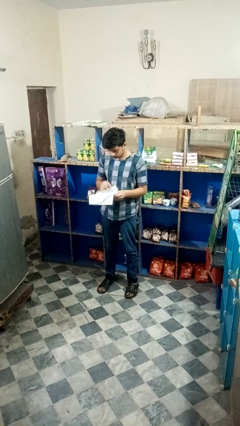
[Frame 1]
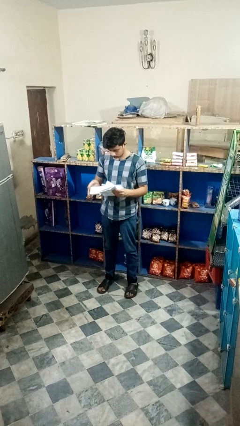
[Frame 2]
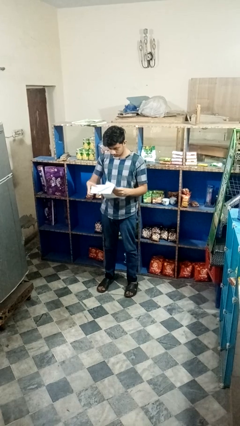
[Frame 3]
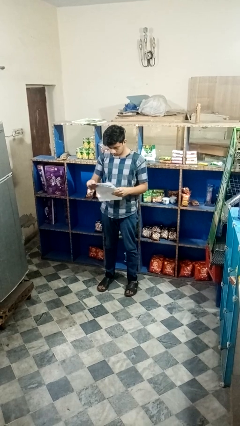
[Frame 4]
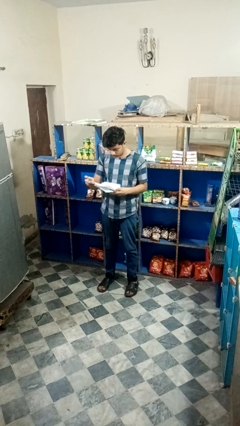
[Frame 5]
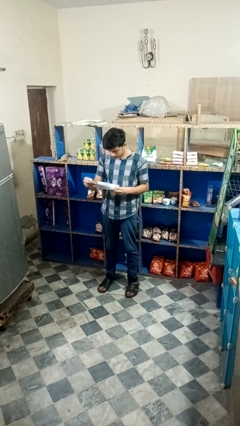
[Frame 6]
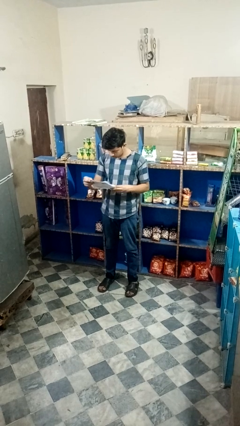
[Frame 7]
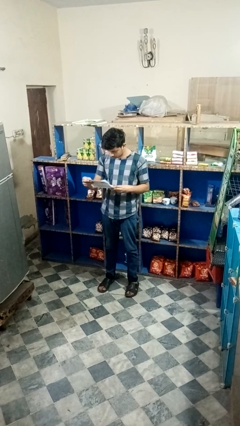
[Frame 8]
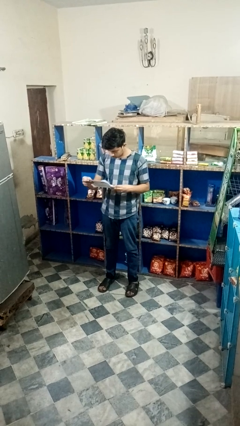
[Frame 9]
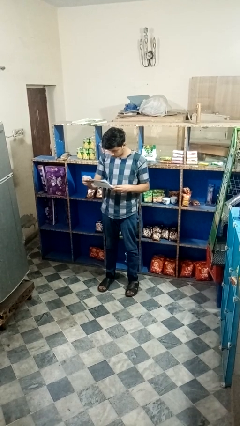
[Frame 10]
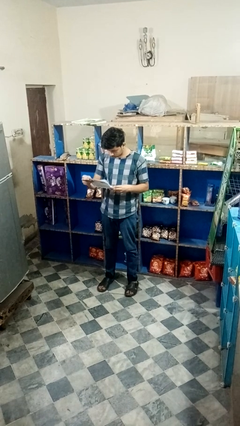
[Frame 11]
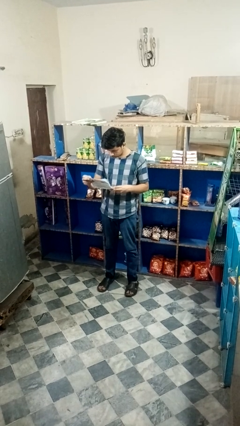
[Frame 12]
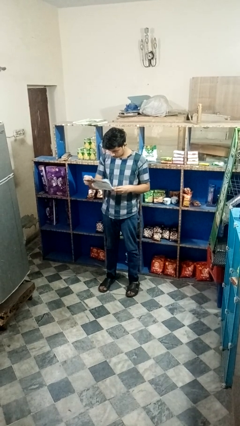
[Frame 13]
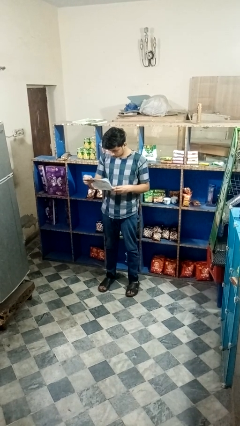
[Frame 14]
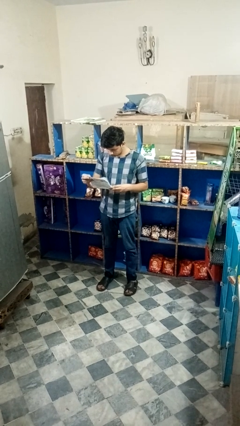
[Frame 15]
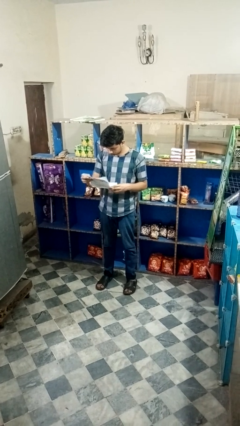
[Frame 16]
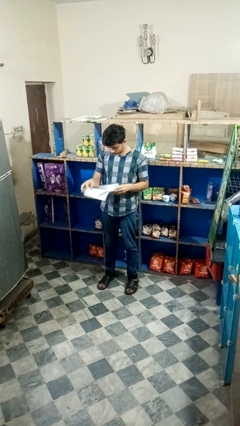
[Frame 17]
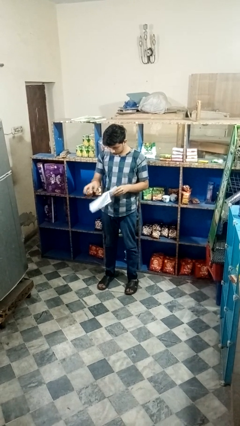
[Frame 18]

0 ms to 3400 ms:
person reads newspaper

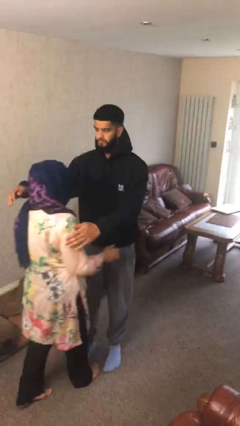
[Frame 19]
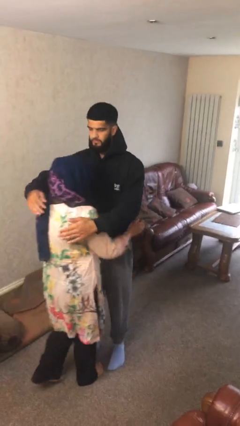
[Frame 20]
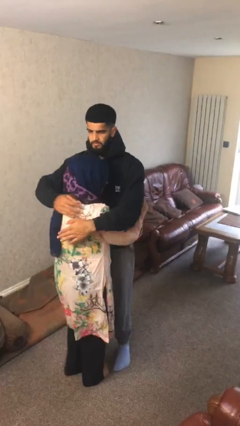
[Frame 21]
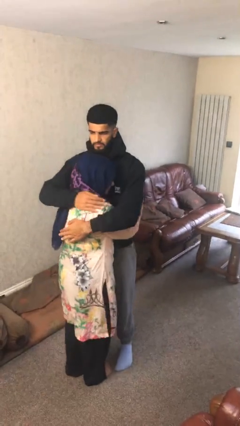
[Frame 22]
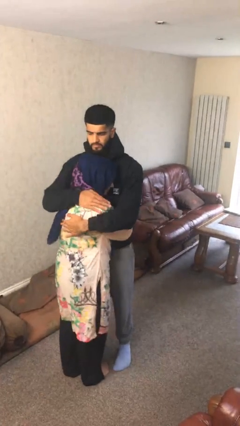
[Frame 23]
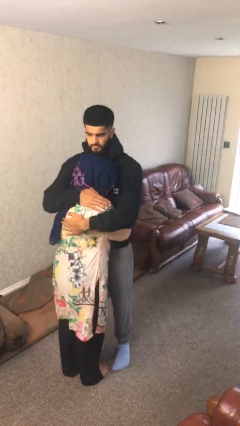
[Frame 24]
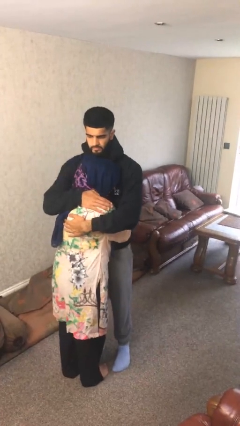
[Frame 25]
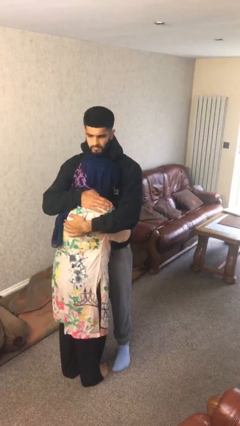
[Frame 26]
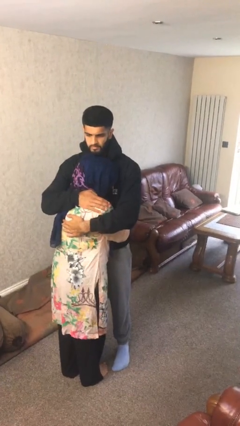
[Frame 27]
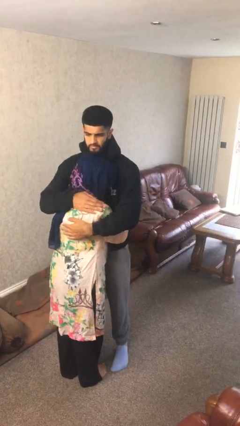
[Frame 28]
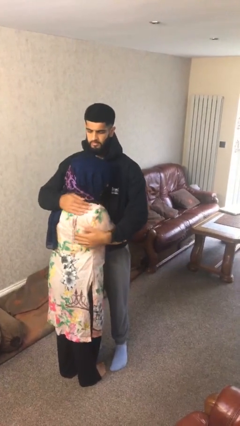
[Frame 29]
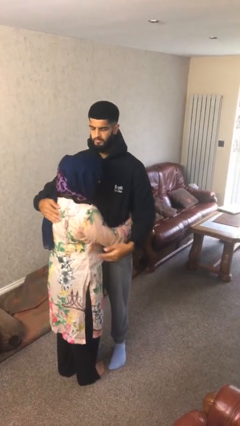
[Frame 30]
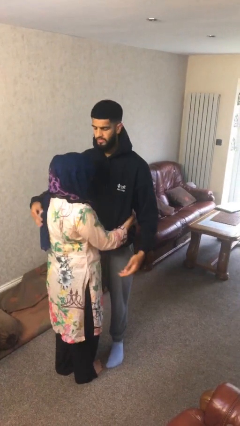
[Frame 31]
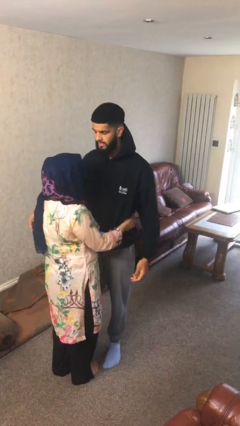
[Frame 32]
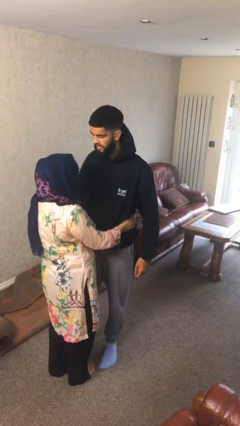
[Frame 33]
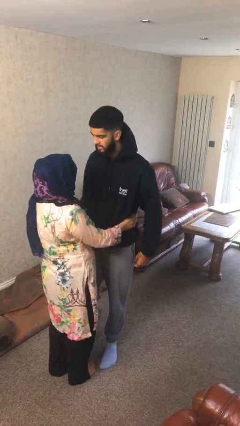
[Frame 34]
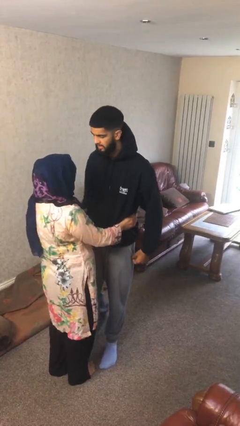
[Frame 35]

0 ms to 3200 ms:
person embraces person

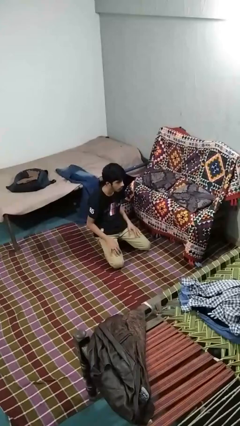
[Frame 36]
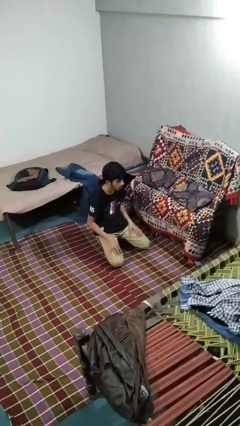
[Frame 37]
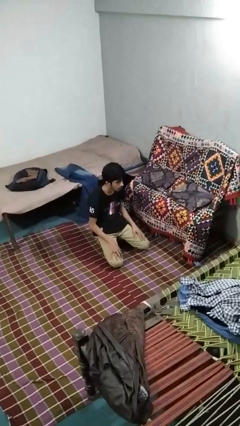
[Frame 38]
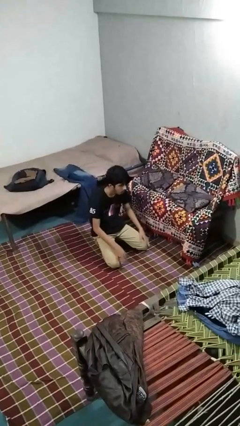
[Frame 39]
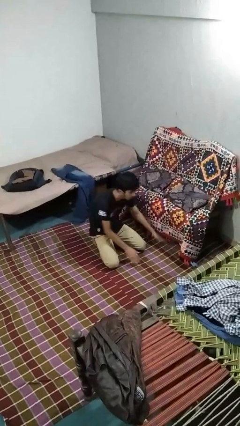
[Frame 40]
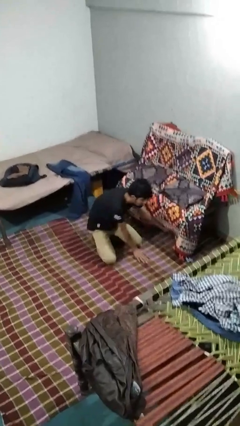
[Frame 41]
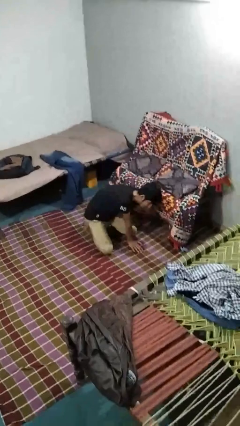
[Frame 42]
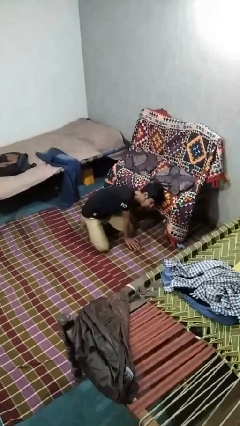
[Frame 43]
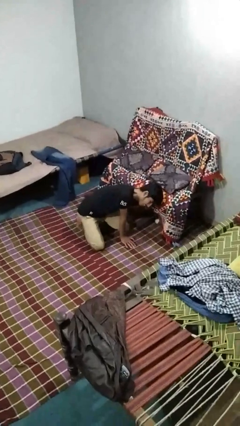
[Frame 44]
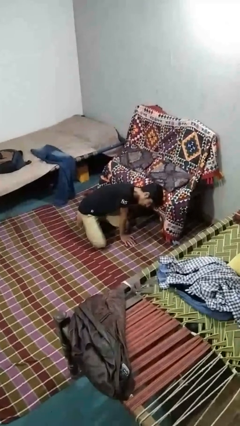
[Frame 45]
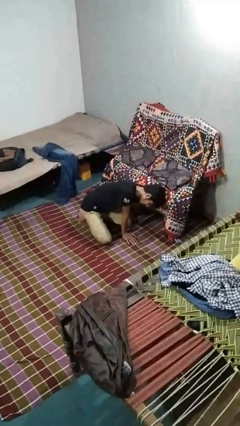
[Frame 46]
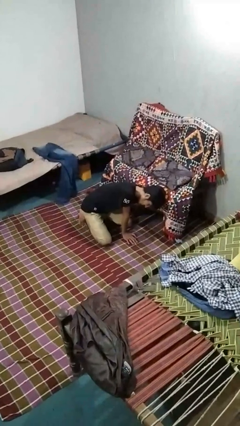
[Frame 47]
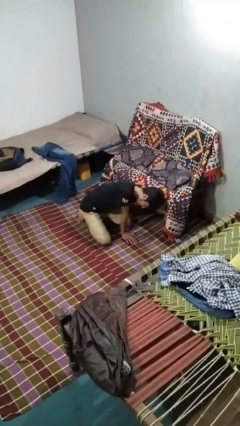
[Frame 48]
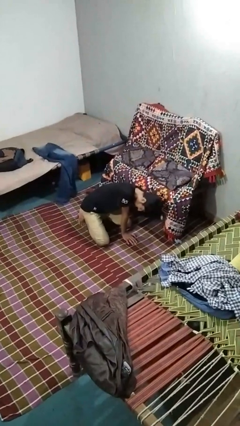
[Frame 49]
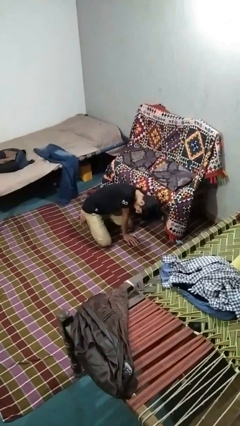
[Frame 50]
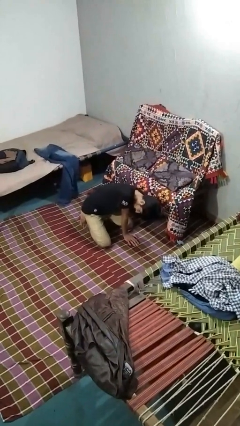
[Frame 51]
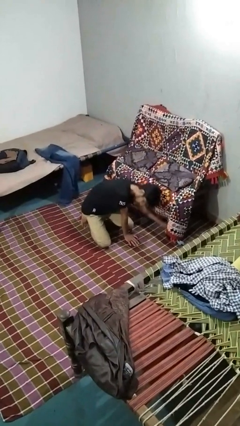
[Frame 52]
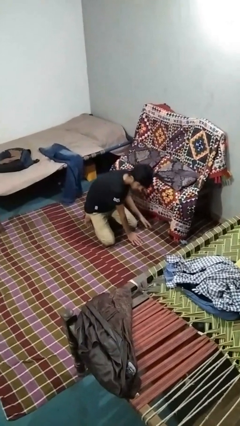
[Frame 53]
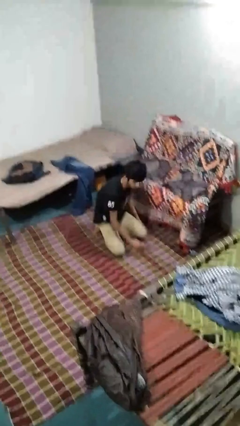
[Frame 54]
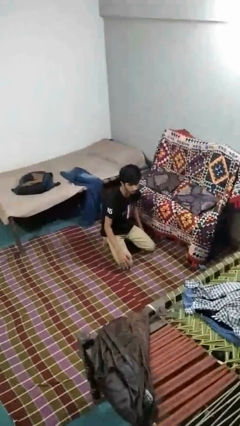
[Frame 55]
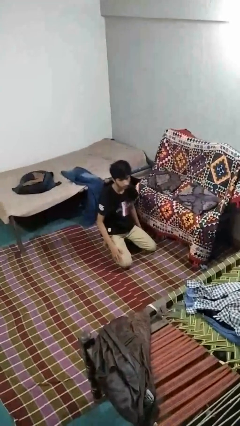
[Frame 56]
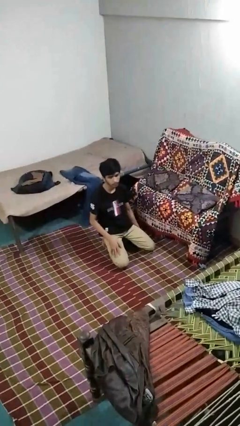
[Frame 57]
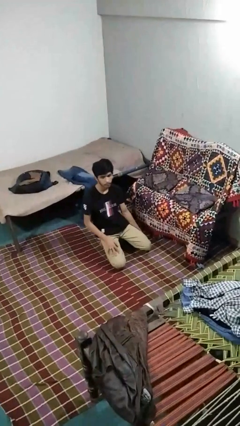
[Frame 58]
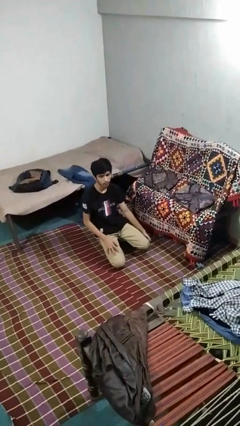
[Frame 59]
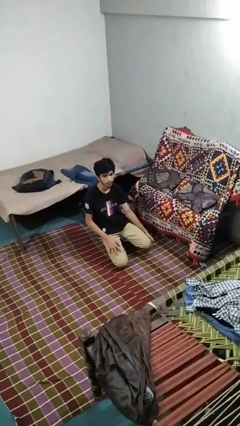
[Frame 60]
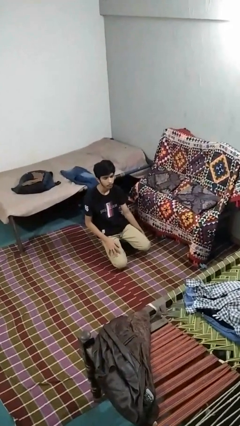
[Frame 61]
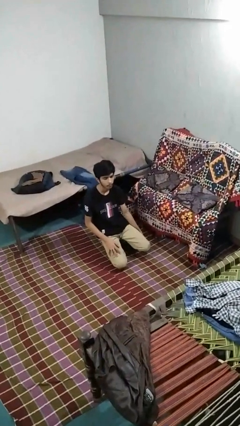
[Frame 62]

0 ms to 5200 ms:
person searches under couch

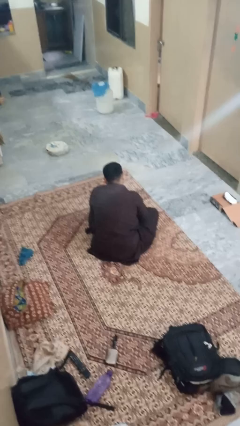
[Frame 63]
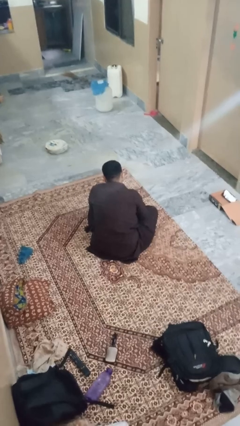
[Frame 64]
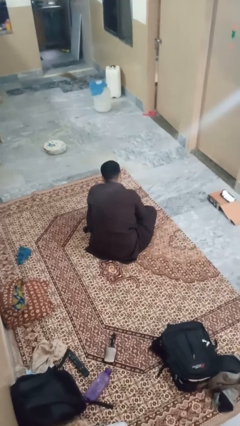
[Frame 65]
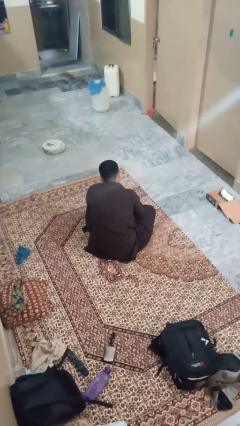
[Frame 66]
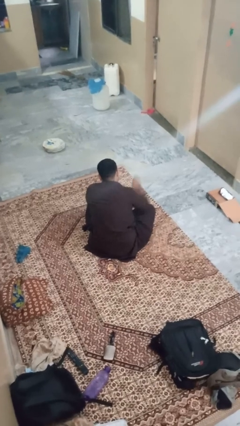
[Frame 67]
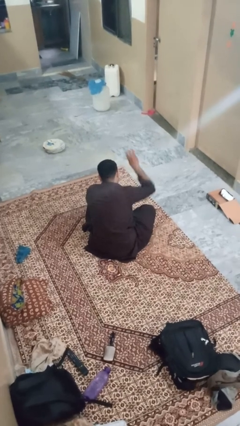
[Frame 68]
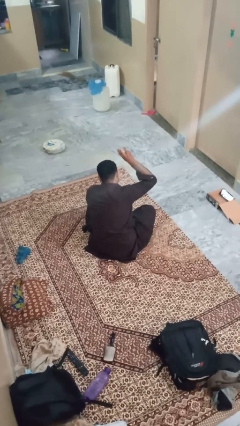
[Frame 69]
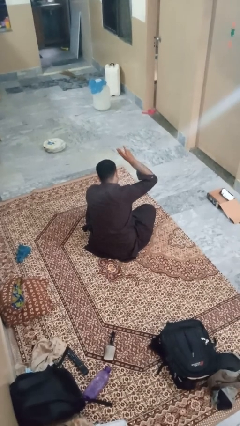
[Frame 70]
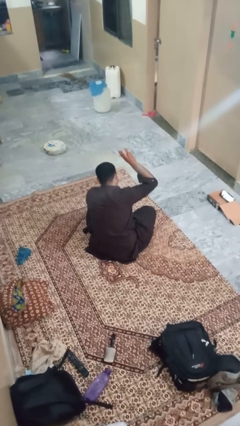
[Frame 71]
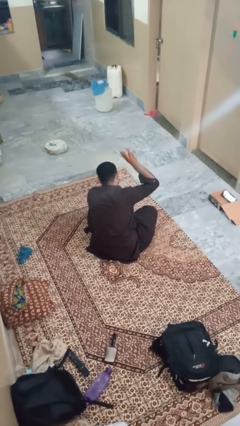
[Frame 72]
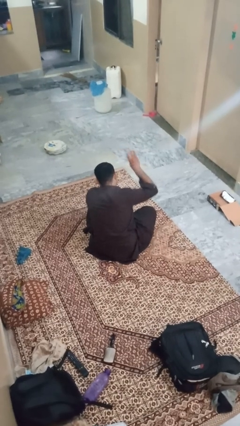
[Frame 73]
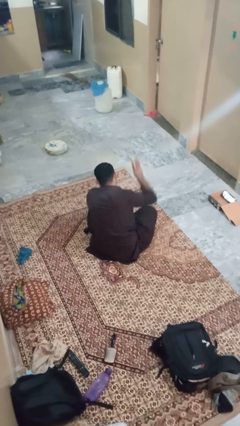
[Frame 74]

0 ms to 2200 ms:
person gestures number three

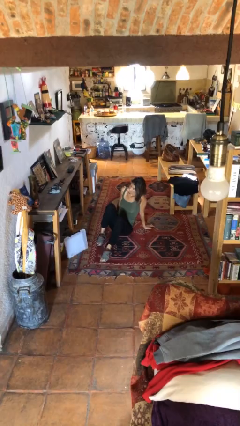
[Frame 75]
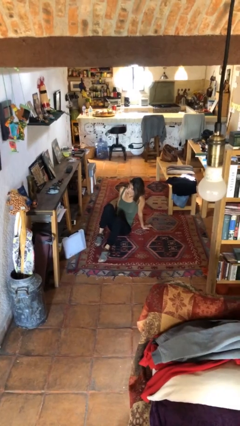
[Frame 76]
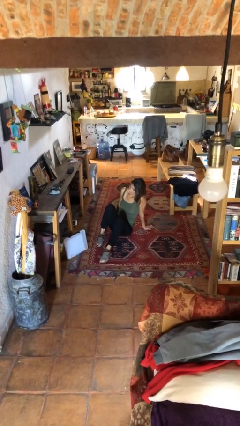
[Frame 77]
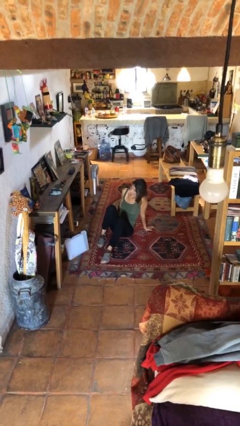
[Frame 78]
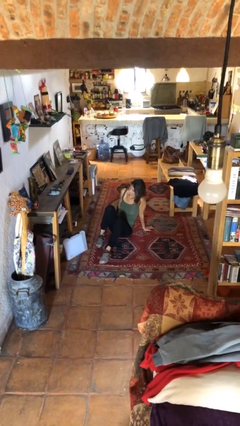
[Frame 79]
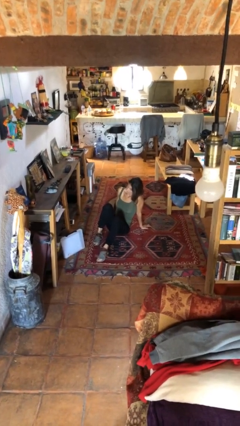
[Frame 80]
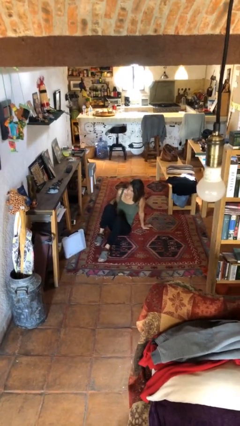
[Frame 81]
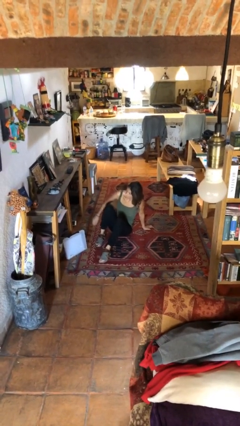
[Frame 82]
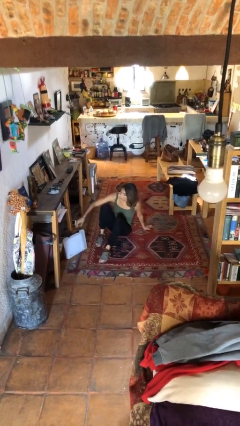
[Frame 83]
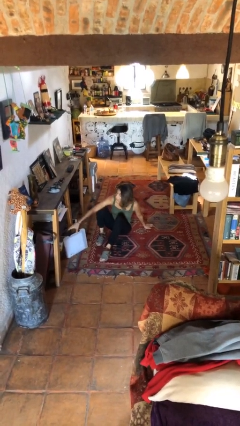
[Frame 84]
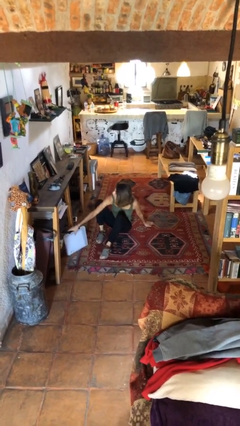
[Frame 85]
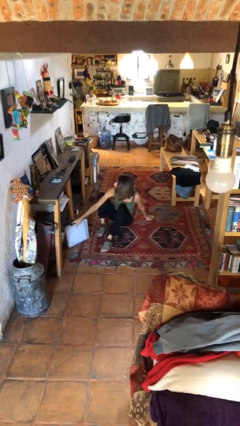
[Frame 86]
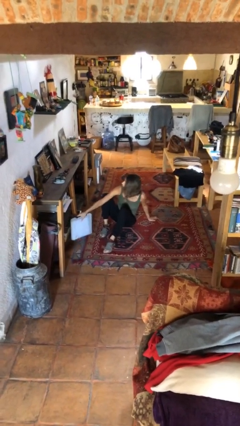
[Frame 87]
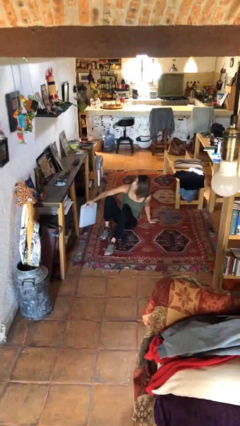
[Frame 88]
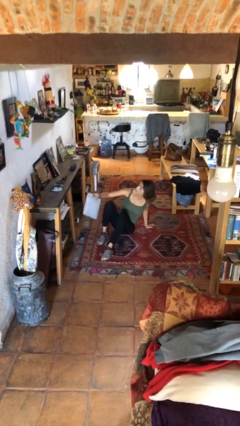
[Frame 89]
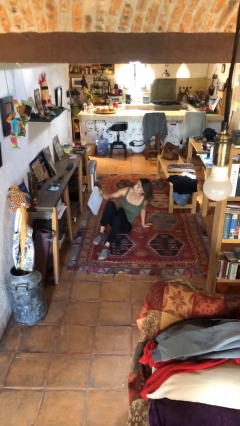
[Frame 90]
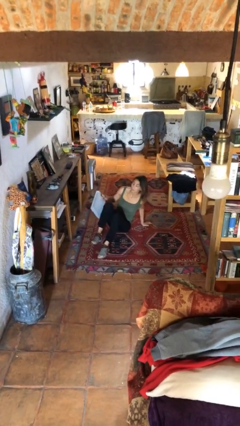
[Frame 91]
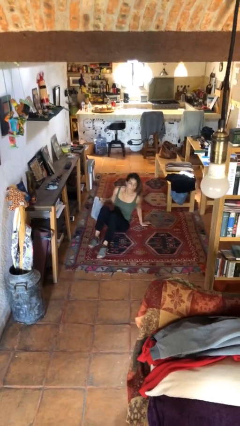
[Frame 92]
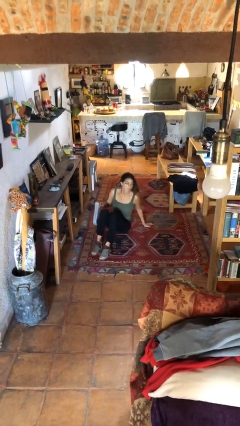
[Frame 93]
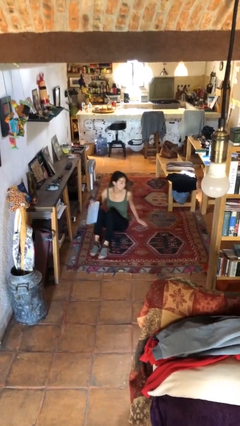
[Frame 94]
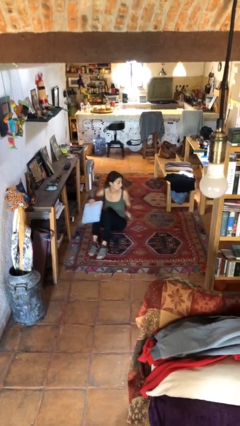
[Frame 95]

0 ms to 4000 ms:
person picks up object from floor
